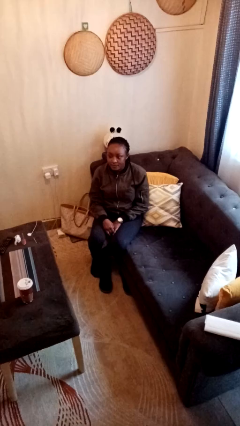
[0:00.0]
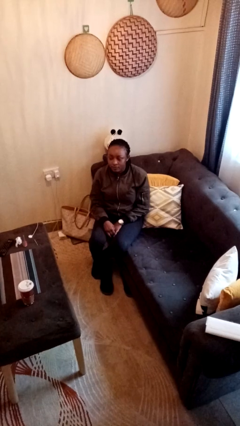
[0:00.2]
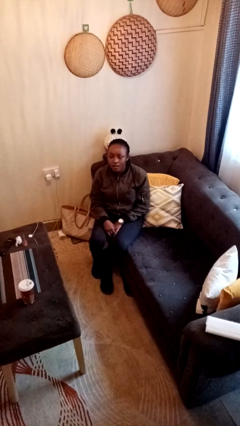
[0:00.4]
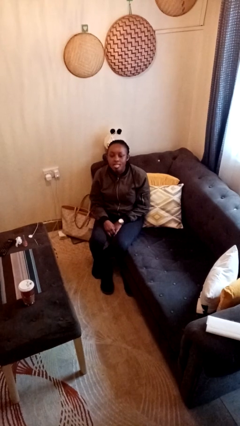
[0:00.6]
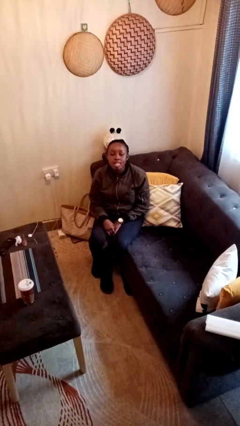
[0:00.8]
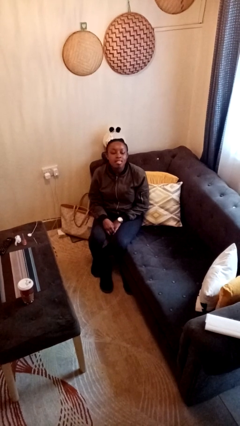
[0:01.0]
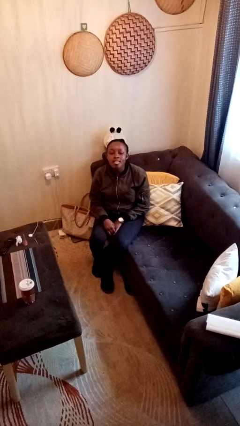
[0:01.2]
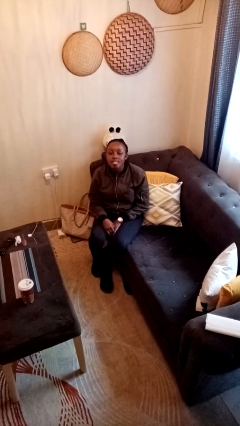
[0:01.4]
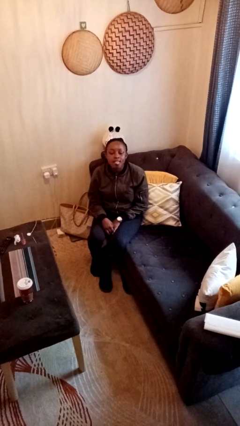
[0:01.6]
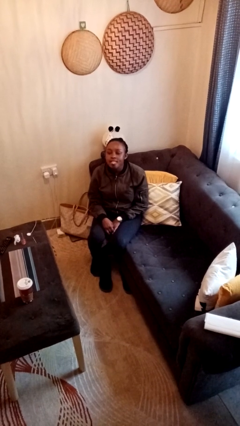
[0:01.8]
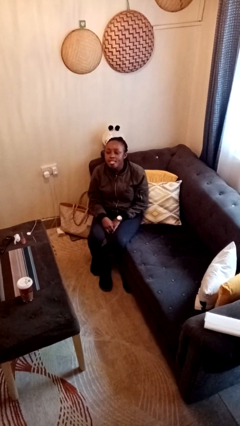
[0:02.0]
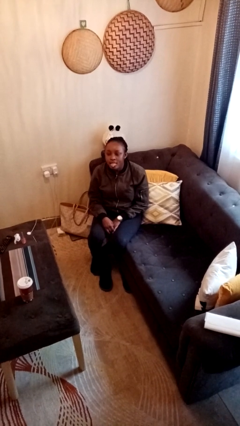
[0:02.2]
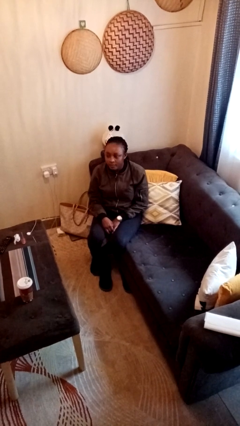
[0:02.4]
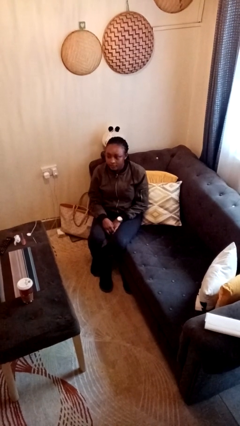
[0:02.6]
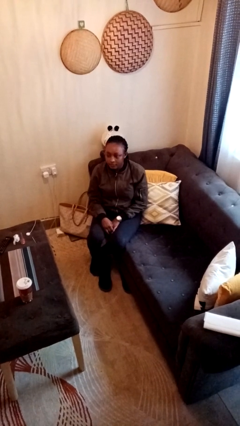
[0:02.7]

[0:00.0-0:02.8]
person sticks out tongue

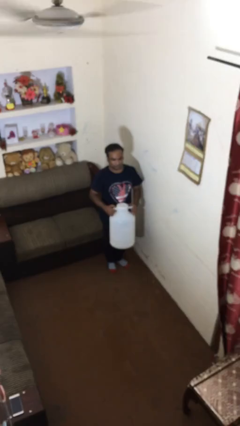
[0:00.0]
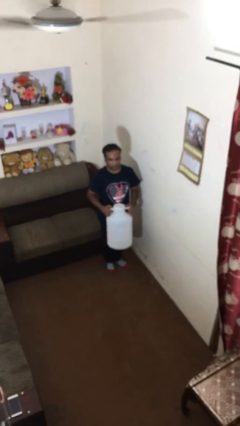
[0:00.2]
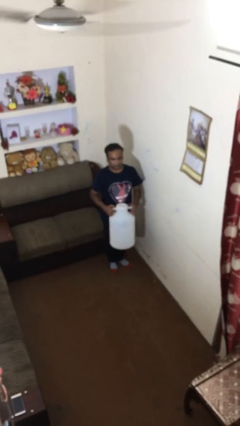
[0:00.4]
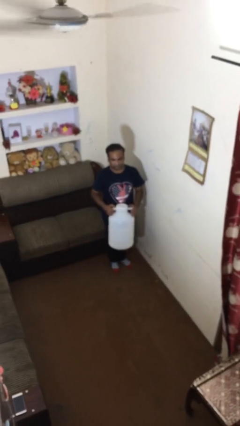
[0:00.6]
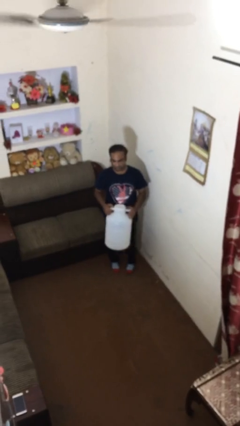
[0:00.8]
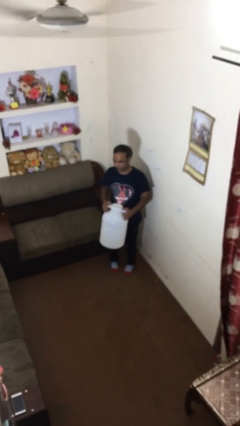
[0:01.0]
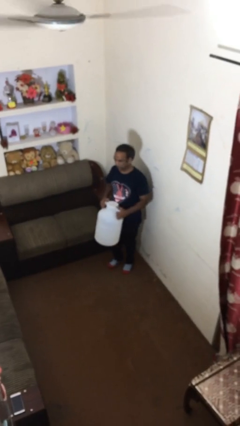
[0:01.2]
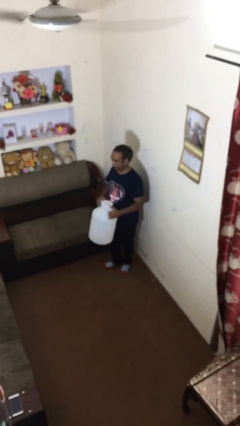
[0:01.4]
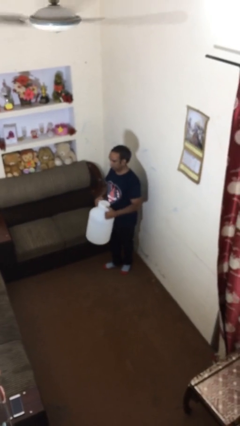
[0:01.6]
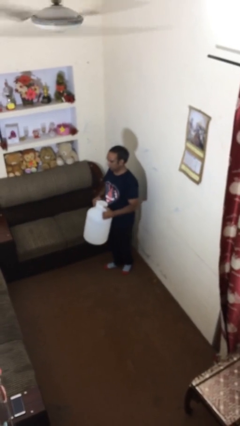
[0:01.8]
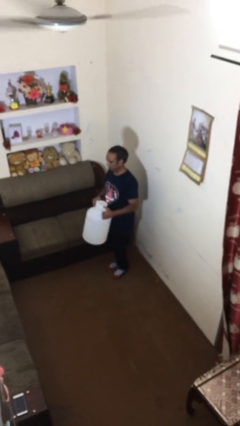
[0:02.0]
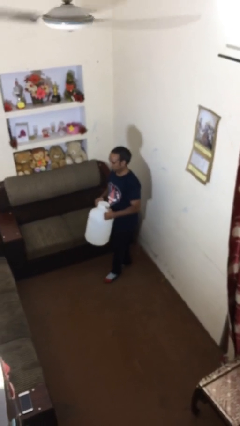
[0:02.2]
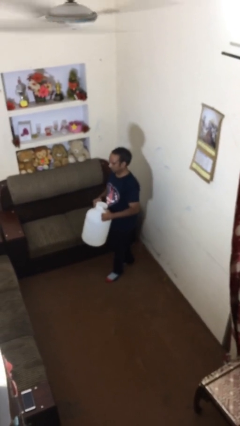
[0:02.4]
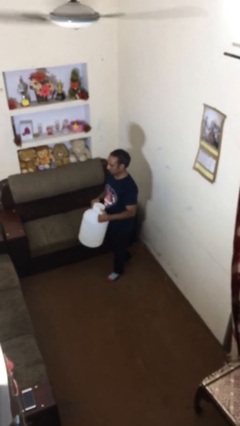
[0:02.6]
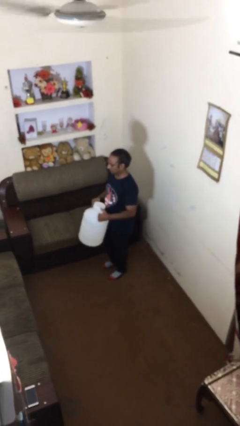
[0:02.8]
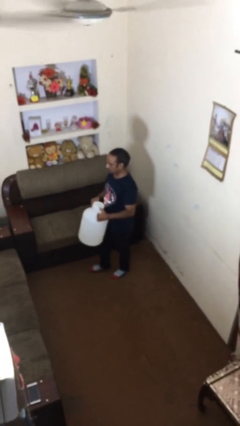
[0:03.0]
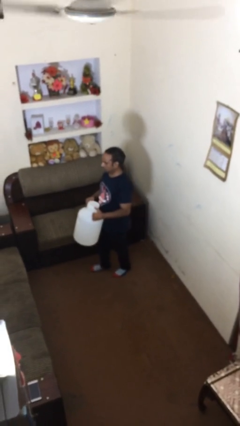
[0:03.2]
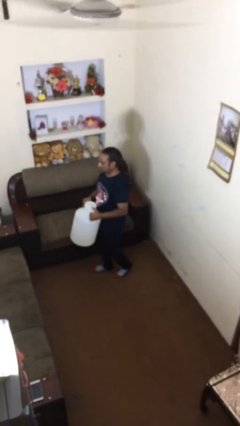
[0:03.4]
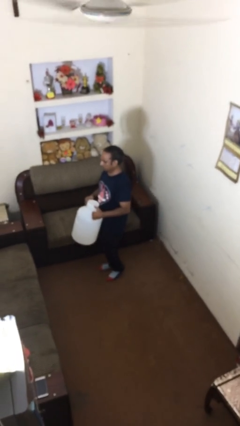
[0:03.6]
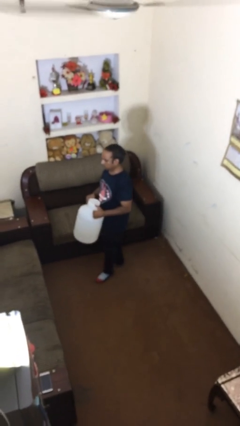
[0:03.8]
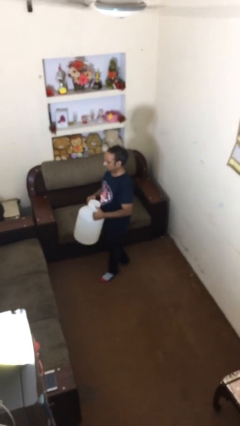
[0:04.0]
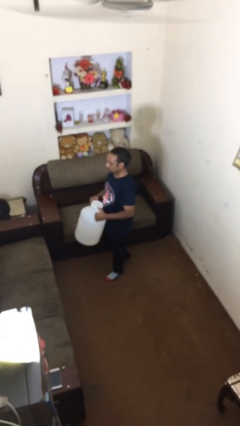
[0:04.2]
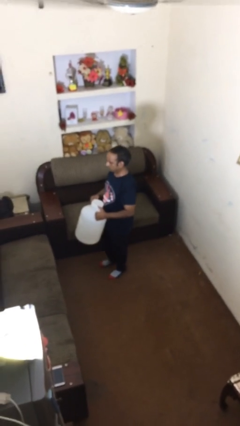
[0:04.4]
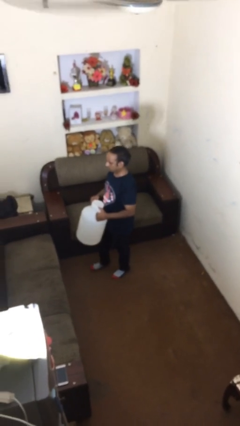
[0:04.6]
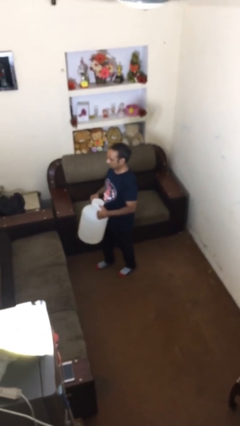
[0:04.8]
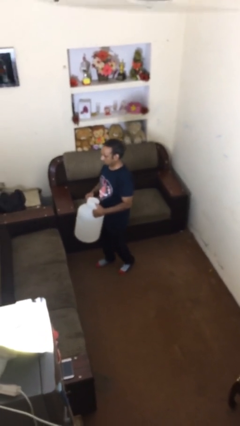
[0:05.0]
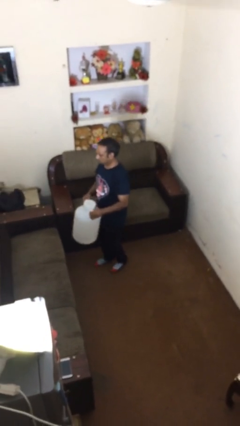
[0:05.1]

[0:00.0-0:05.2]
person carries heavy object

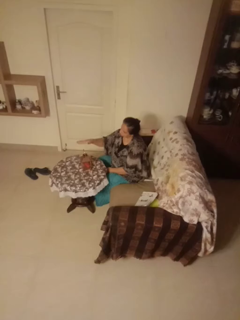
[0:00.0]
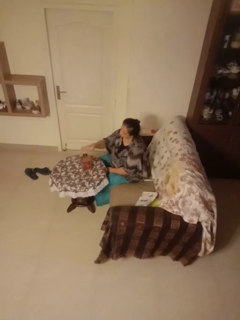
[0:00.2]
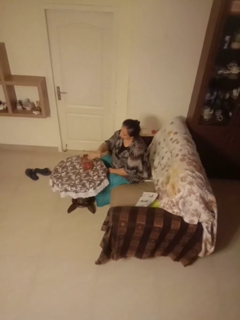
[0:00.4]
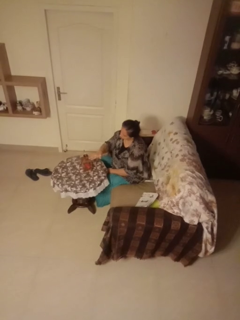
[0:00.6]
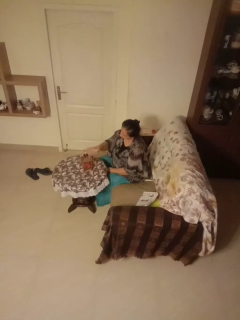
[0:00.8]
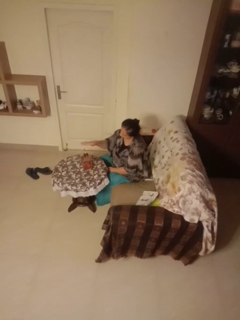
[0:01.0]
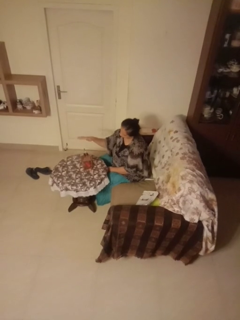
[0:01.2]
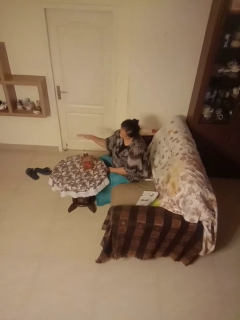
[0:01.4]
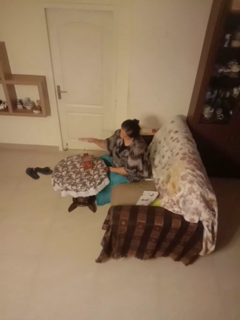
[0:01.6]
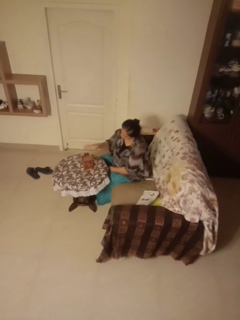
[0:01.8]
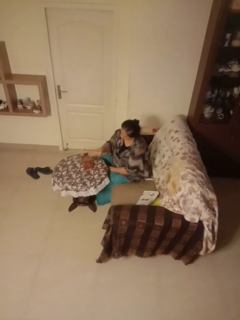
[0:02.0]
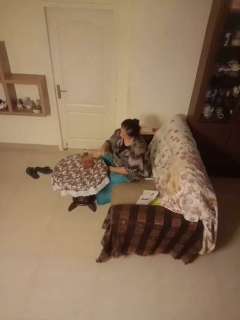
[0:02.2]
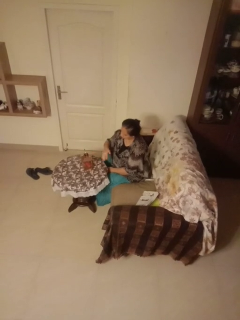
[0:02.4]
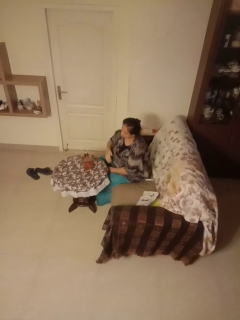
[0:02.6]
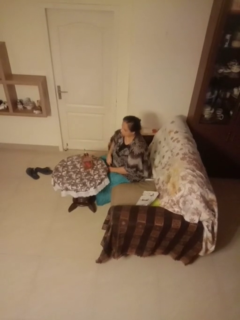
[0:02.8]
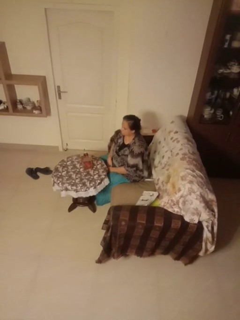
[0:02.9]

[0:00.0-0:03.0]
person waves hand over object

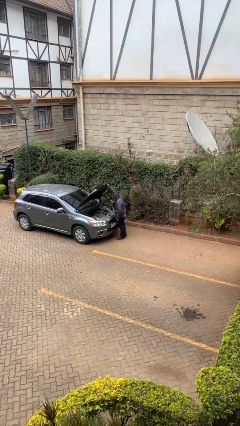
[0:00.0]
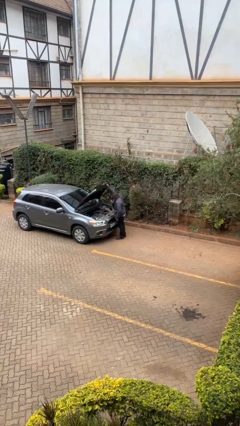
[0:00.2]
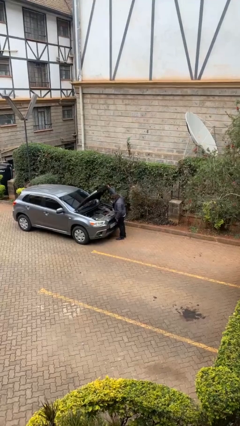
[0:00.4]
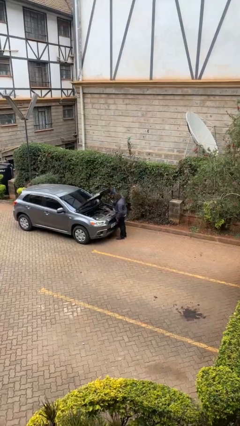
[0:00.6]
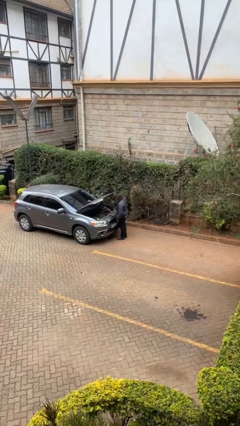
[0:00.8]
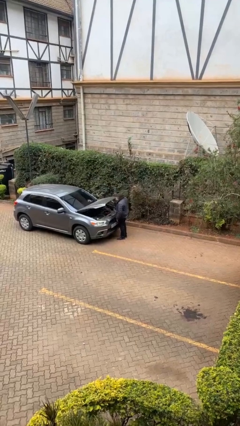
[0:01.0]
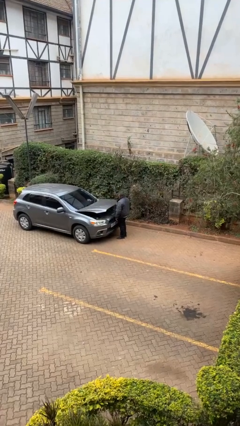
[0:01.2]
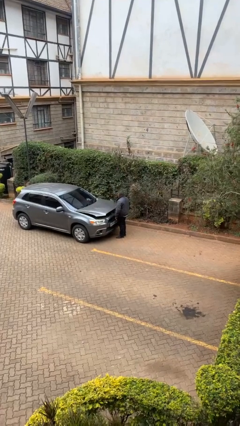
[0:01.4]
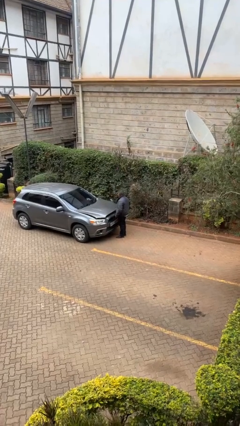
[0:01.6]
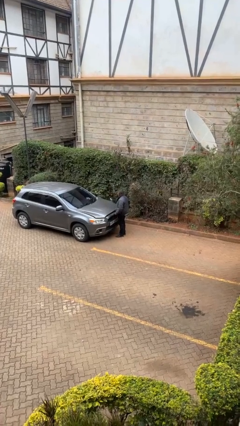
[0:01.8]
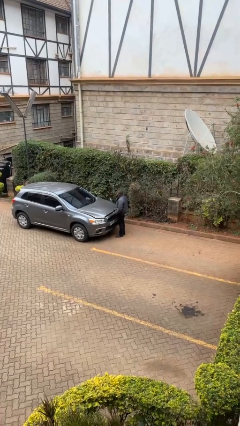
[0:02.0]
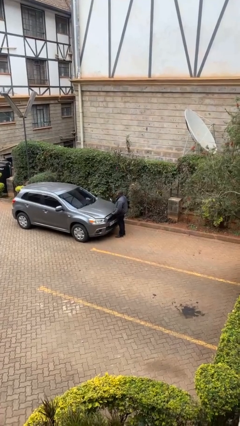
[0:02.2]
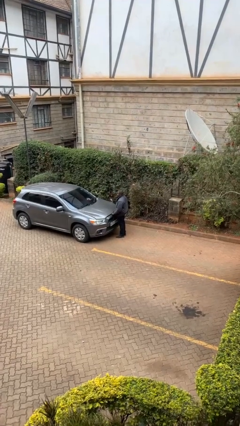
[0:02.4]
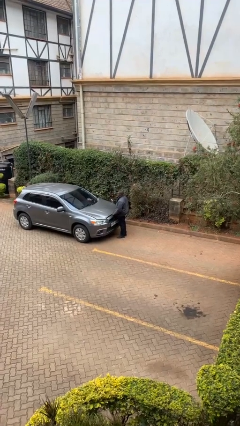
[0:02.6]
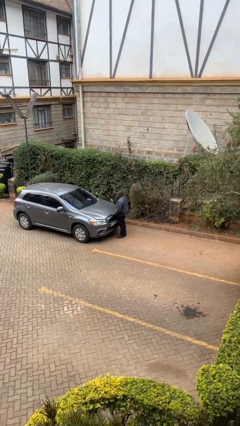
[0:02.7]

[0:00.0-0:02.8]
person closes car hood

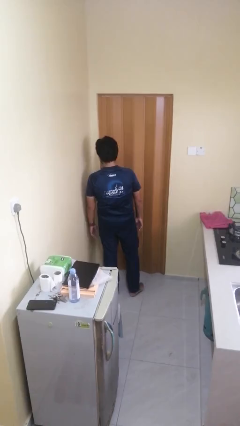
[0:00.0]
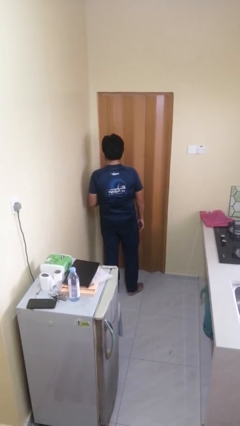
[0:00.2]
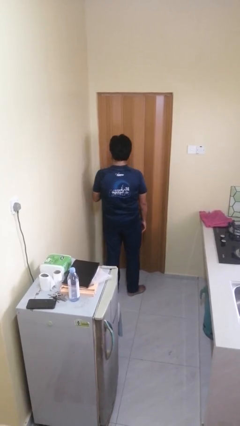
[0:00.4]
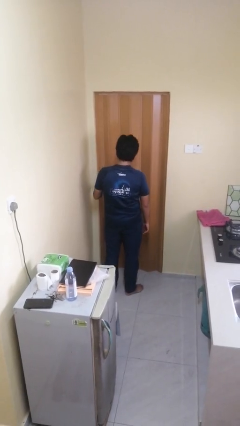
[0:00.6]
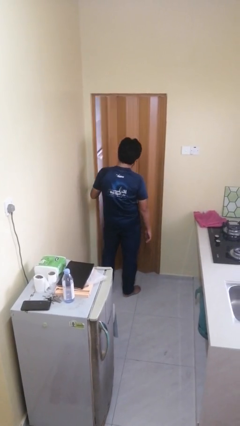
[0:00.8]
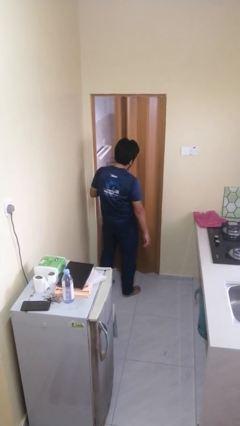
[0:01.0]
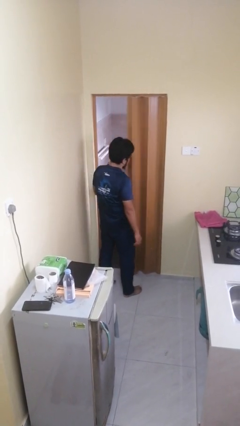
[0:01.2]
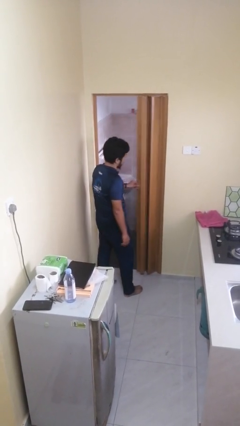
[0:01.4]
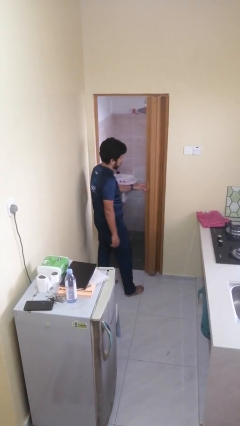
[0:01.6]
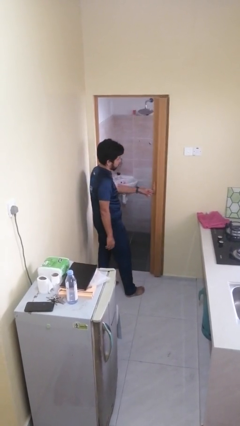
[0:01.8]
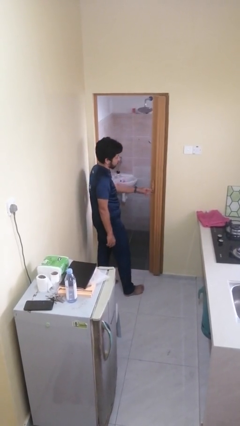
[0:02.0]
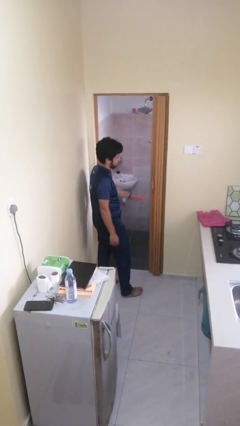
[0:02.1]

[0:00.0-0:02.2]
person opens sliding door

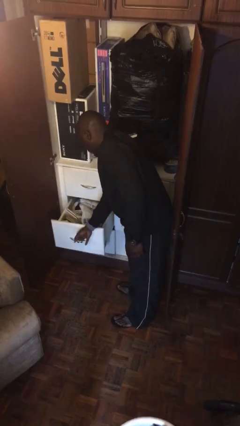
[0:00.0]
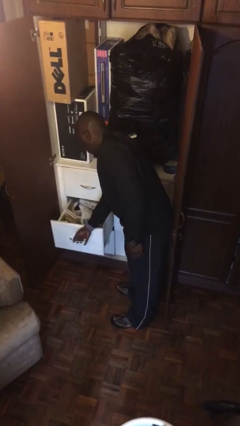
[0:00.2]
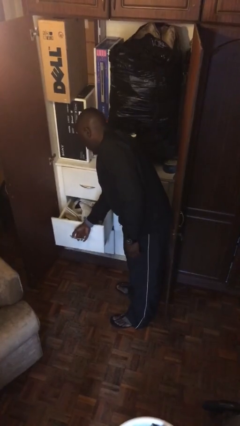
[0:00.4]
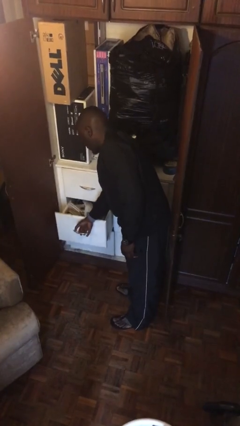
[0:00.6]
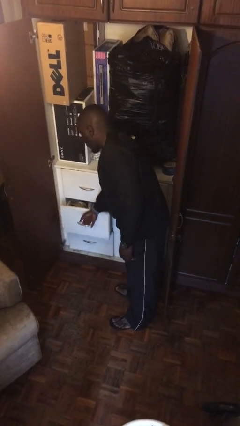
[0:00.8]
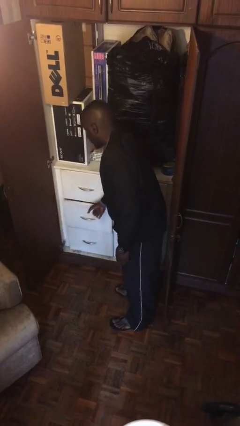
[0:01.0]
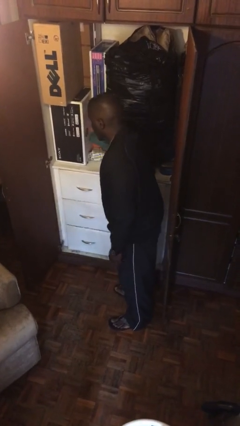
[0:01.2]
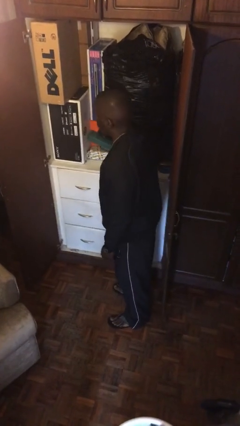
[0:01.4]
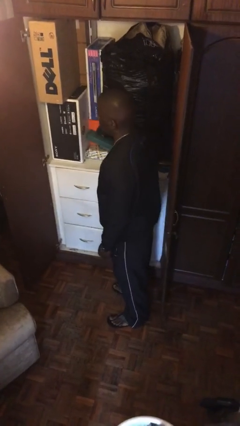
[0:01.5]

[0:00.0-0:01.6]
person closes dresser drawer

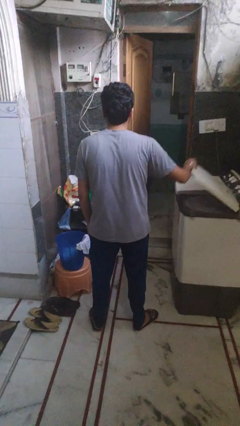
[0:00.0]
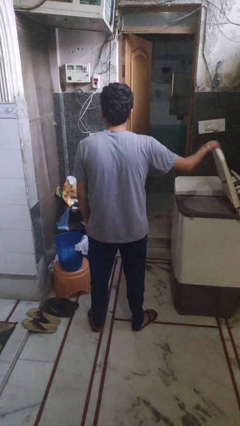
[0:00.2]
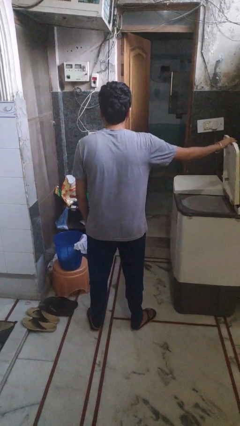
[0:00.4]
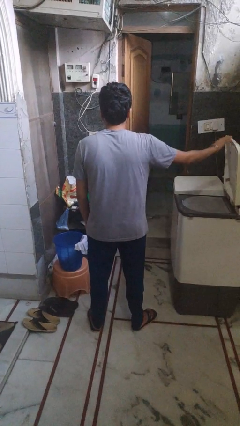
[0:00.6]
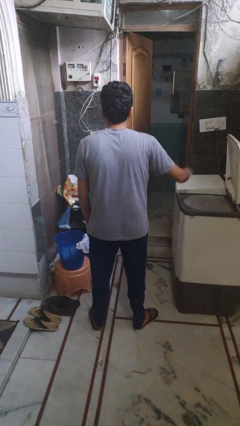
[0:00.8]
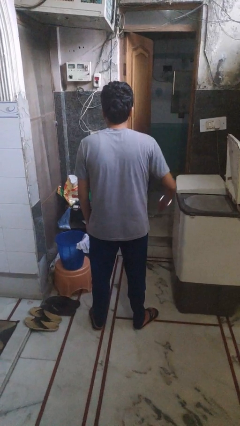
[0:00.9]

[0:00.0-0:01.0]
person opens clothes washer
